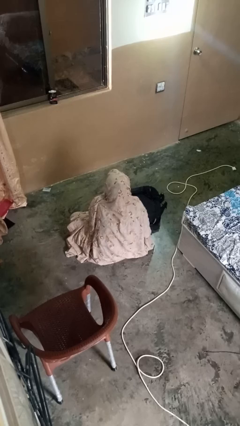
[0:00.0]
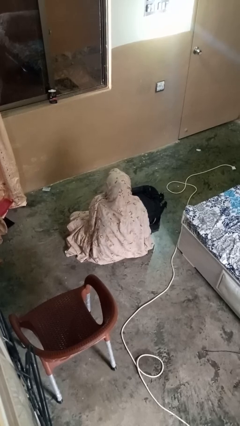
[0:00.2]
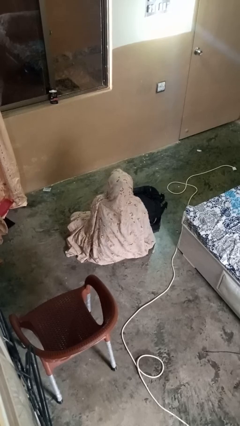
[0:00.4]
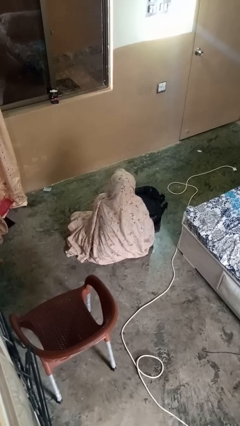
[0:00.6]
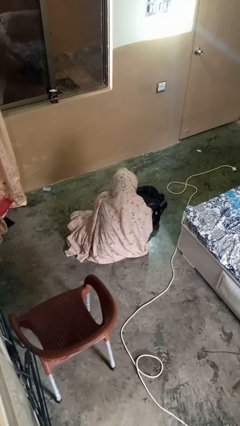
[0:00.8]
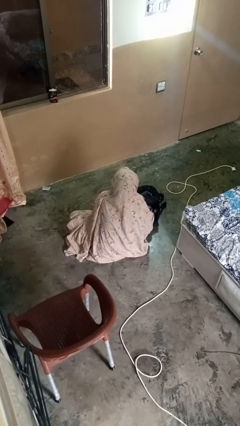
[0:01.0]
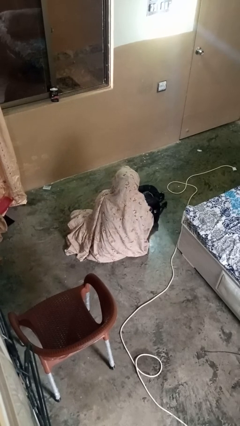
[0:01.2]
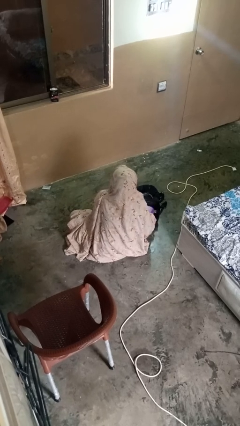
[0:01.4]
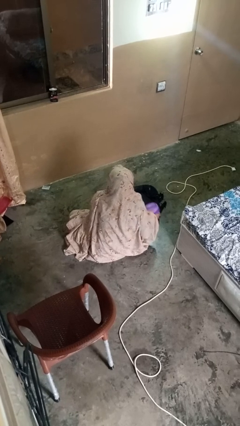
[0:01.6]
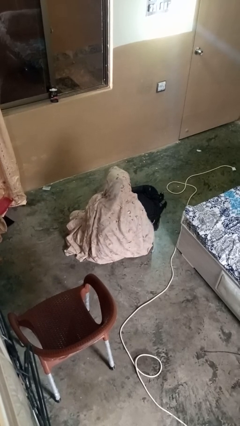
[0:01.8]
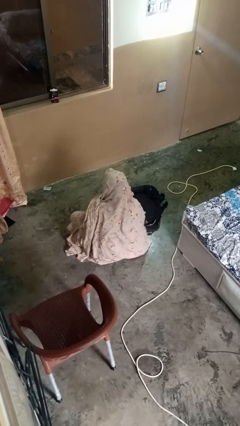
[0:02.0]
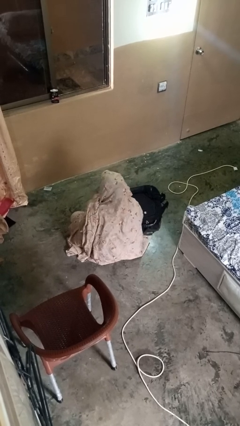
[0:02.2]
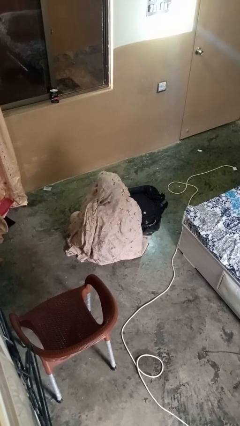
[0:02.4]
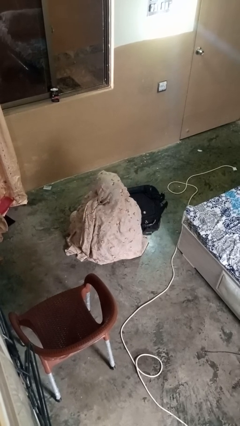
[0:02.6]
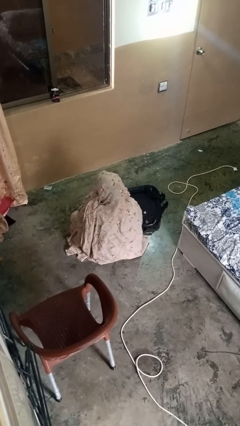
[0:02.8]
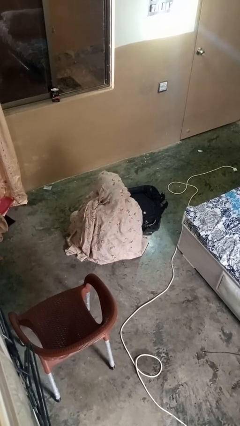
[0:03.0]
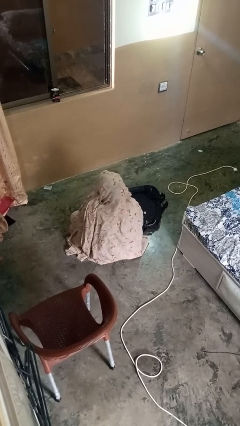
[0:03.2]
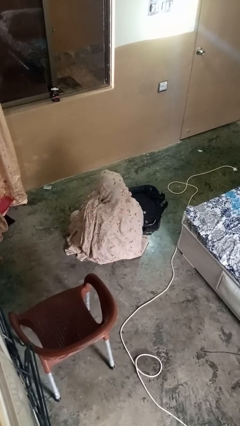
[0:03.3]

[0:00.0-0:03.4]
person eats snack from bag

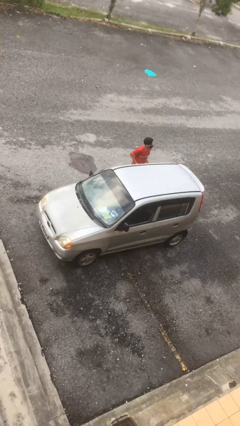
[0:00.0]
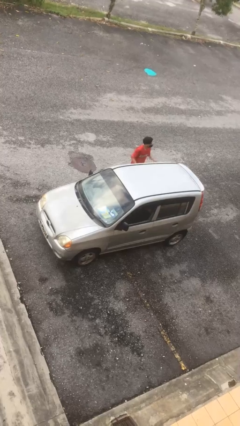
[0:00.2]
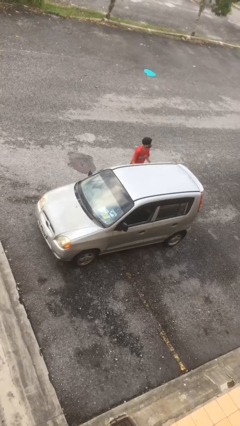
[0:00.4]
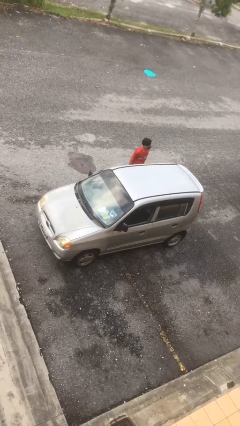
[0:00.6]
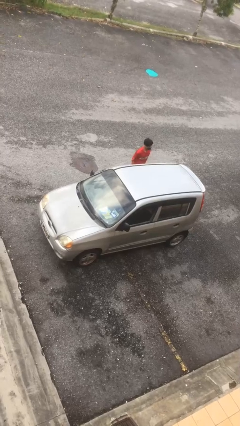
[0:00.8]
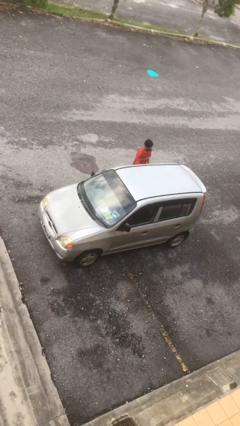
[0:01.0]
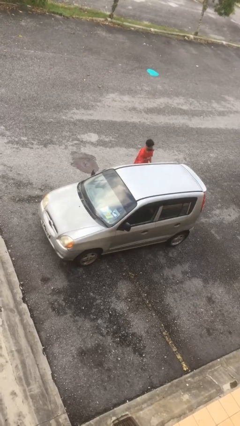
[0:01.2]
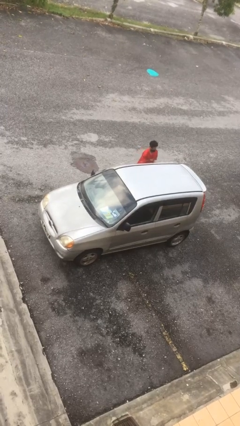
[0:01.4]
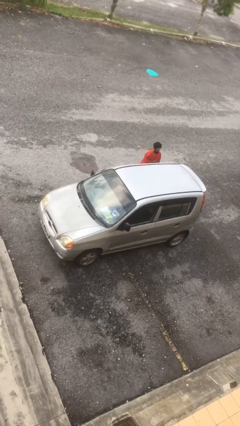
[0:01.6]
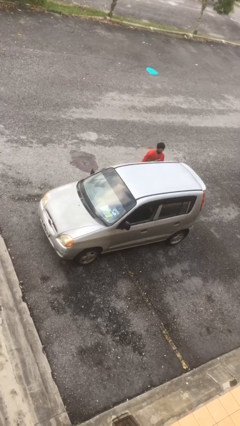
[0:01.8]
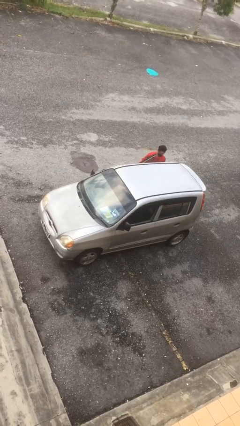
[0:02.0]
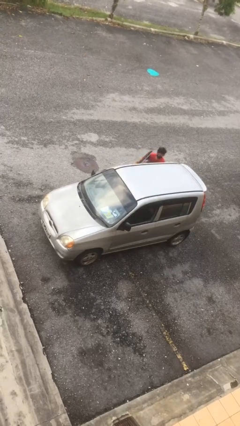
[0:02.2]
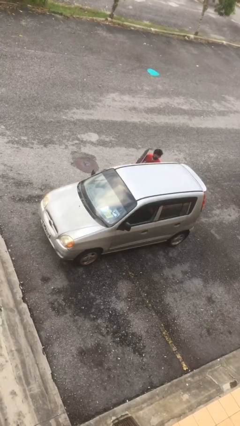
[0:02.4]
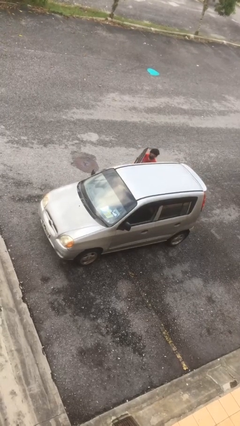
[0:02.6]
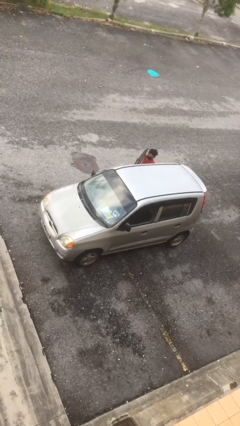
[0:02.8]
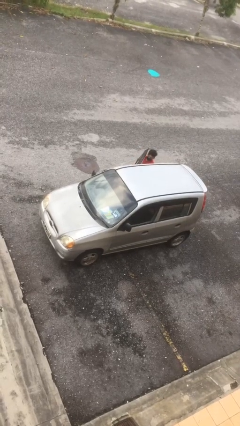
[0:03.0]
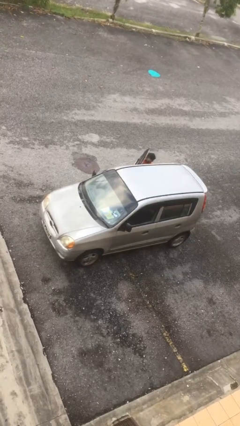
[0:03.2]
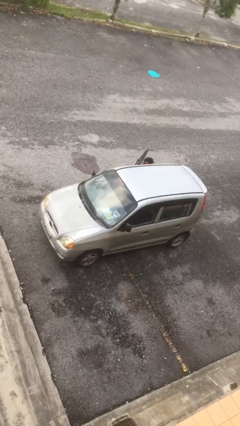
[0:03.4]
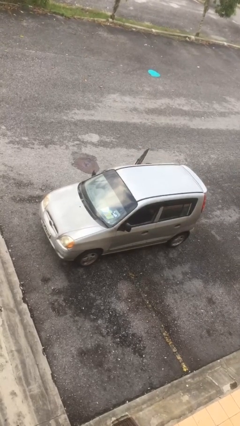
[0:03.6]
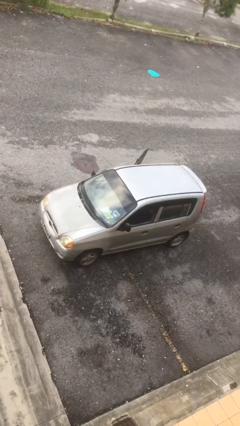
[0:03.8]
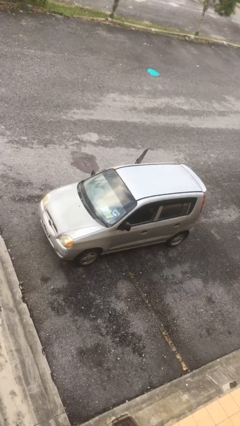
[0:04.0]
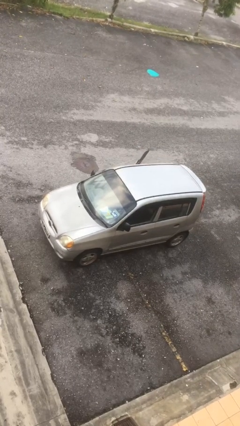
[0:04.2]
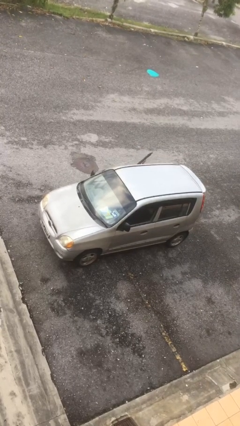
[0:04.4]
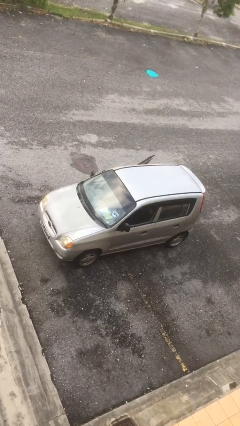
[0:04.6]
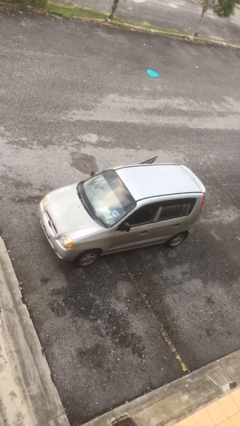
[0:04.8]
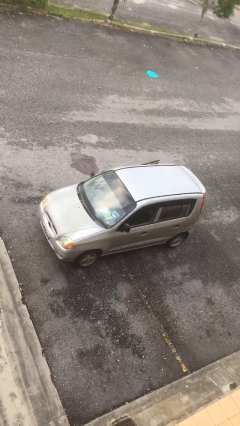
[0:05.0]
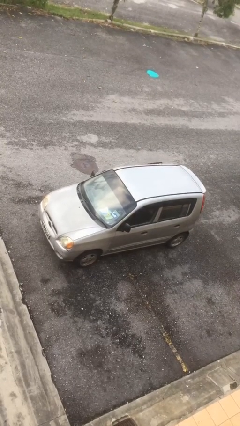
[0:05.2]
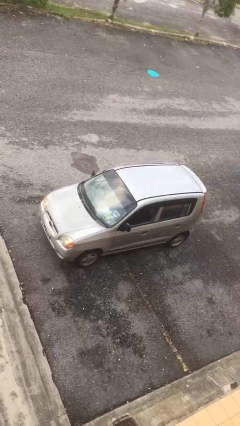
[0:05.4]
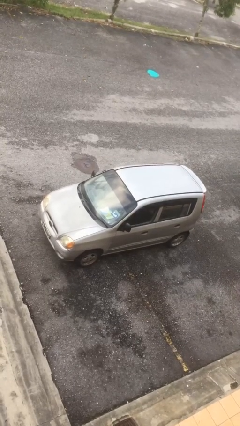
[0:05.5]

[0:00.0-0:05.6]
car picks up person

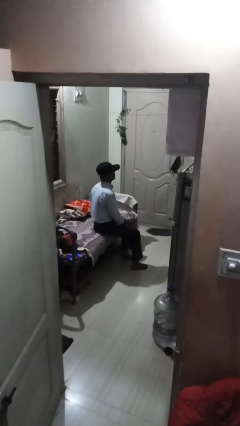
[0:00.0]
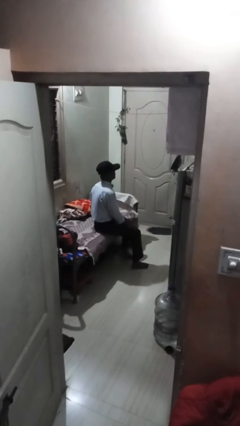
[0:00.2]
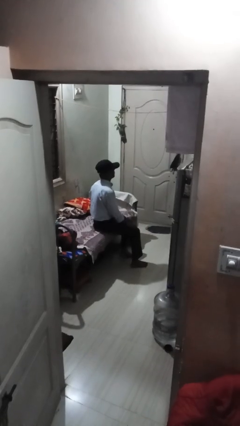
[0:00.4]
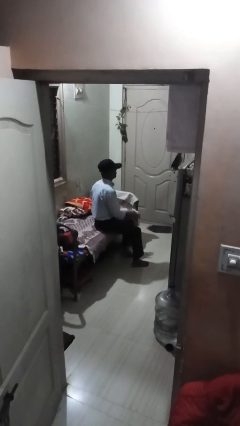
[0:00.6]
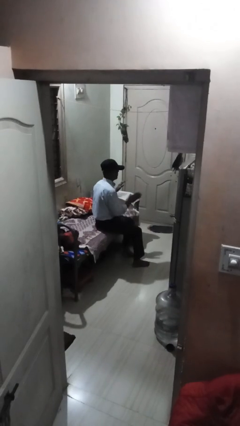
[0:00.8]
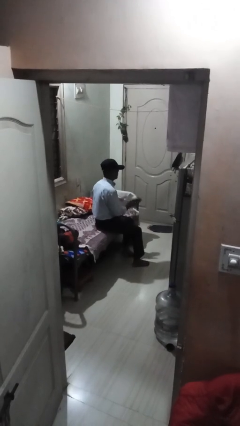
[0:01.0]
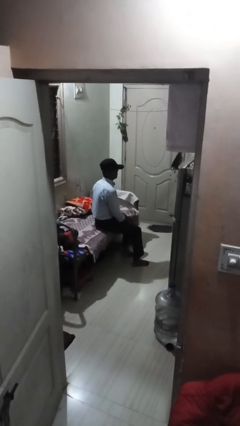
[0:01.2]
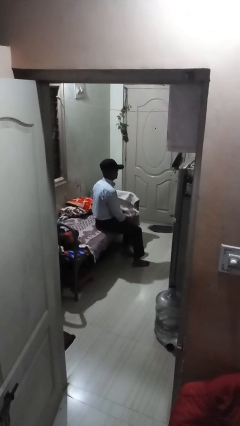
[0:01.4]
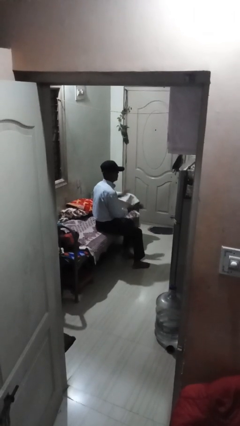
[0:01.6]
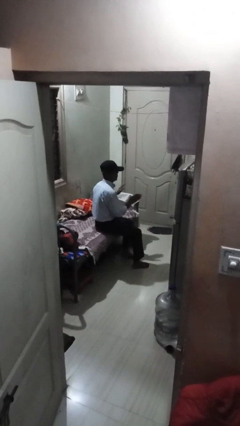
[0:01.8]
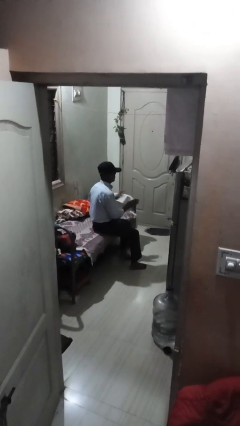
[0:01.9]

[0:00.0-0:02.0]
person slaps hands on thighs

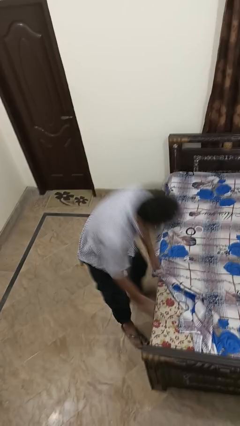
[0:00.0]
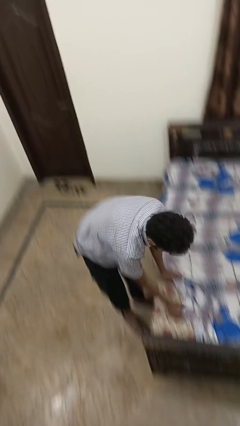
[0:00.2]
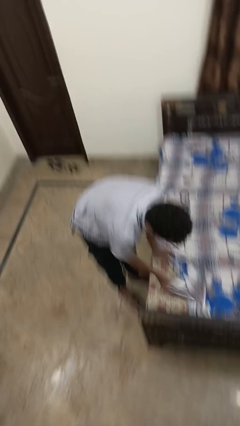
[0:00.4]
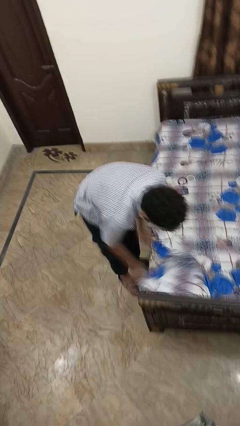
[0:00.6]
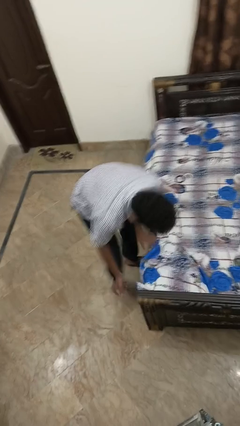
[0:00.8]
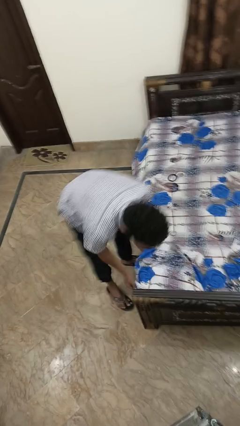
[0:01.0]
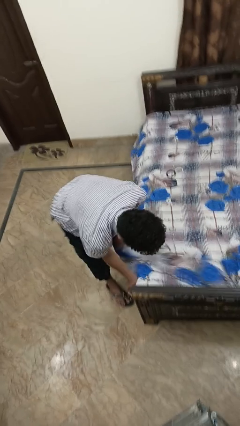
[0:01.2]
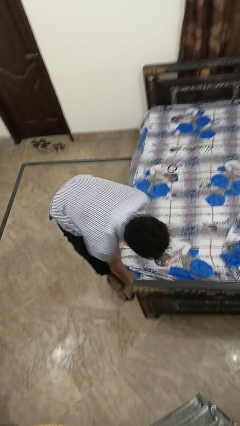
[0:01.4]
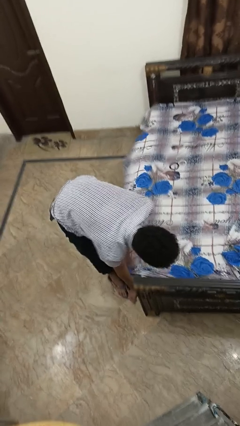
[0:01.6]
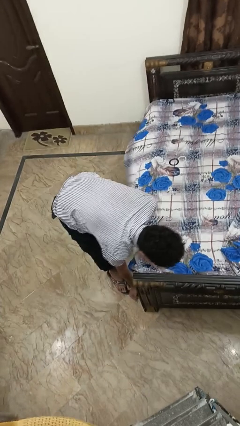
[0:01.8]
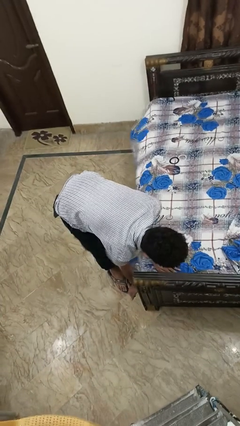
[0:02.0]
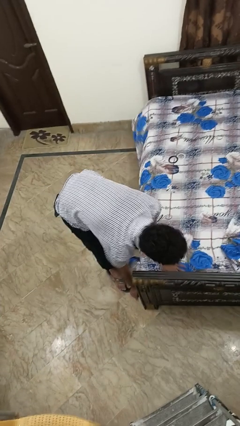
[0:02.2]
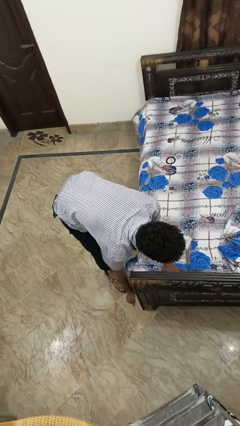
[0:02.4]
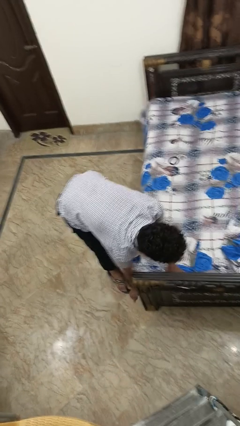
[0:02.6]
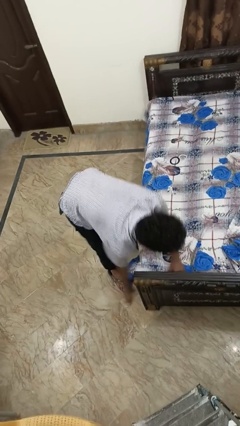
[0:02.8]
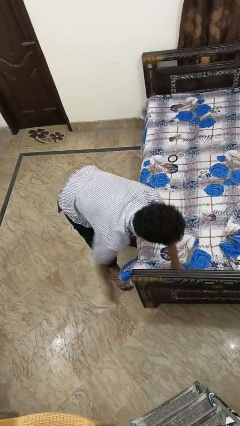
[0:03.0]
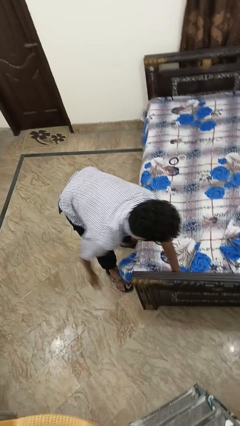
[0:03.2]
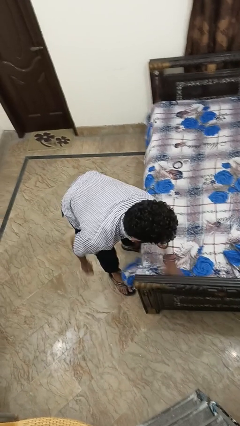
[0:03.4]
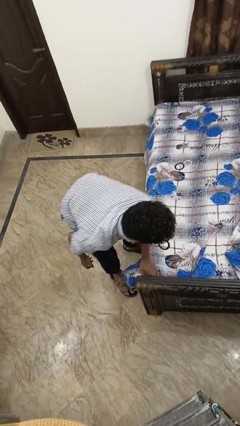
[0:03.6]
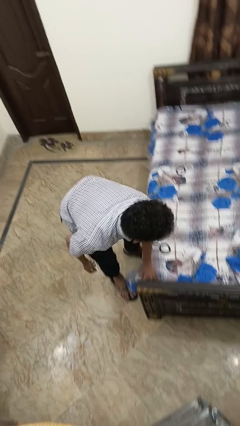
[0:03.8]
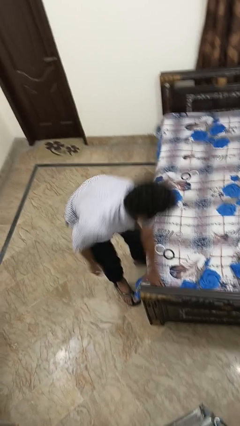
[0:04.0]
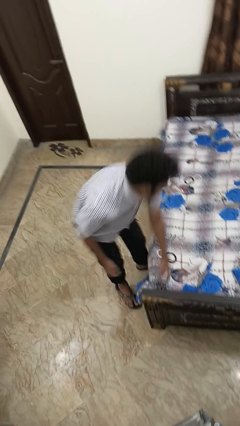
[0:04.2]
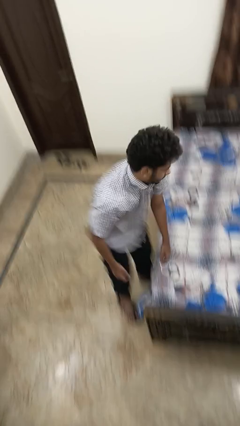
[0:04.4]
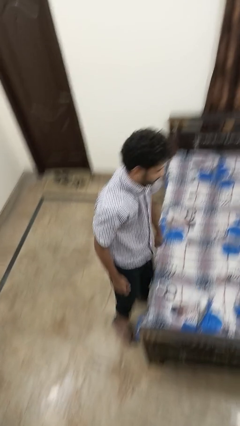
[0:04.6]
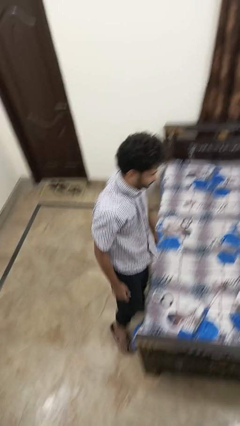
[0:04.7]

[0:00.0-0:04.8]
person makes bed

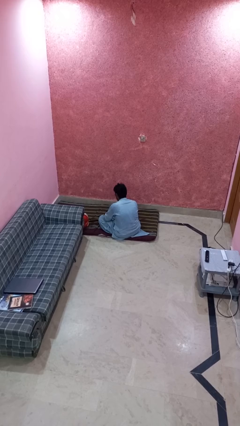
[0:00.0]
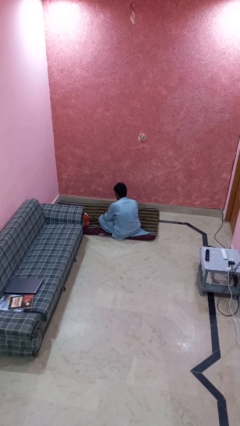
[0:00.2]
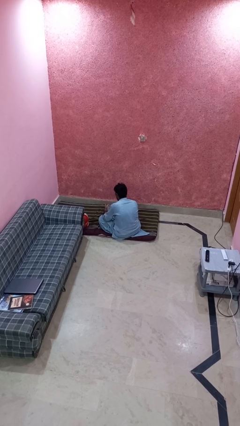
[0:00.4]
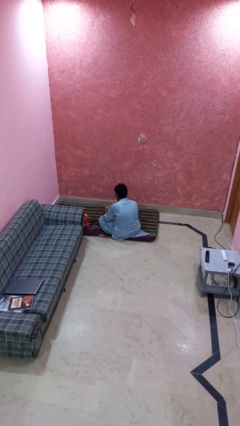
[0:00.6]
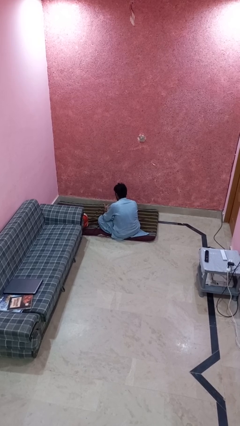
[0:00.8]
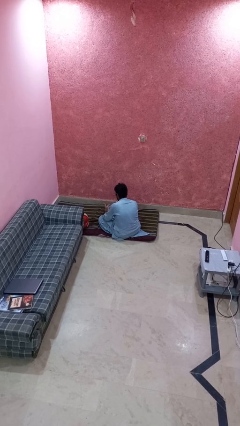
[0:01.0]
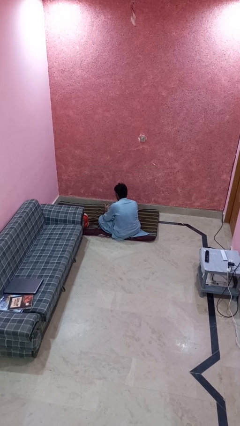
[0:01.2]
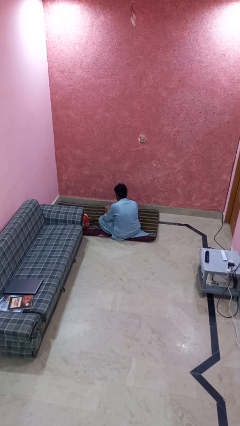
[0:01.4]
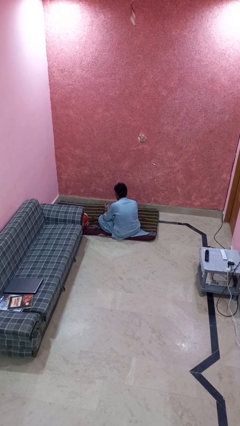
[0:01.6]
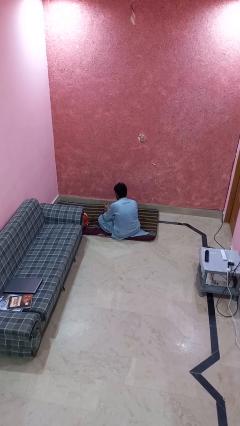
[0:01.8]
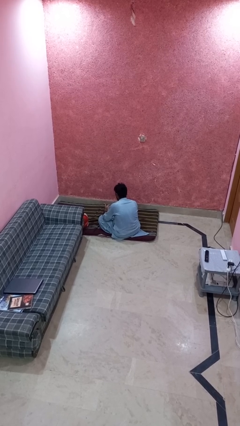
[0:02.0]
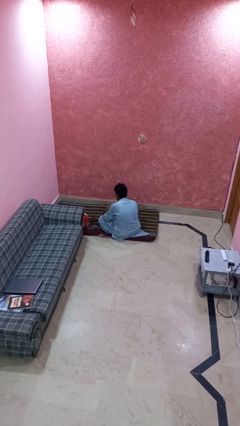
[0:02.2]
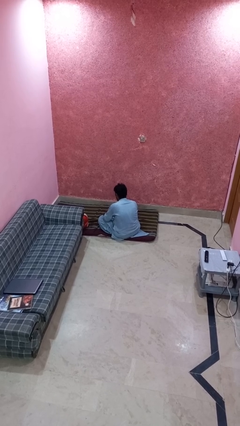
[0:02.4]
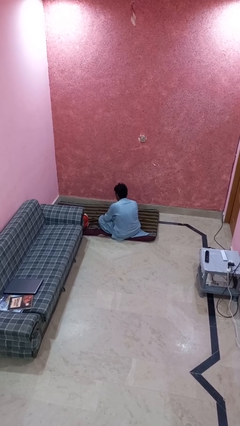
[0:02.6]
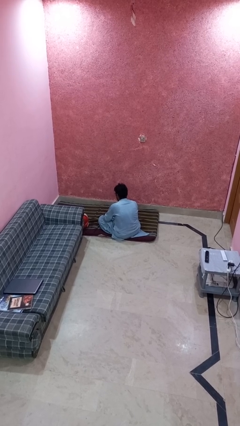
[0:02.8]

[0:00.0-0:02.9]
person looks at hands in lap
